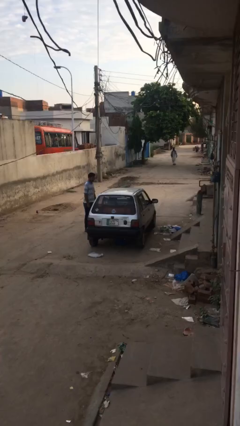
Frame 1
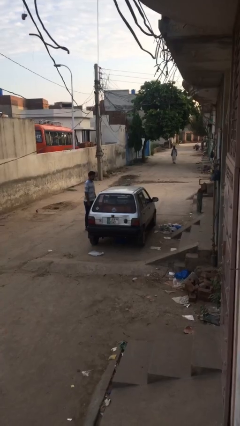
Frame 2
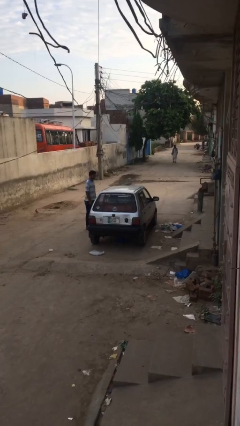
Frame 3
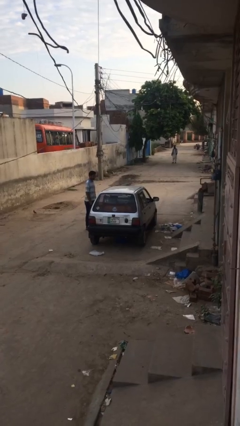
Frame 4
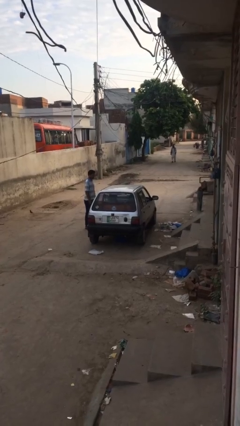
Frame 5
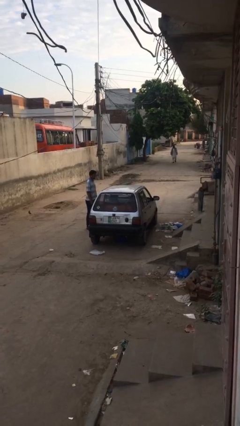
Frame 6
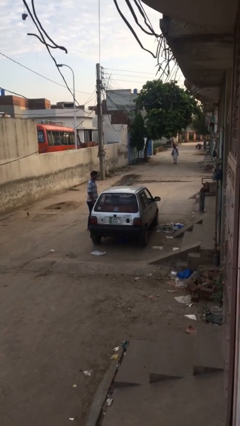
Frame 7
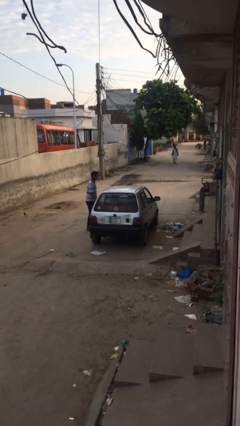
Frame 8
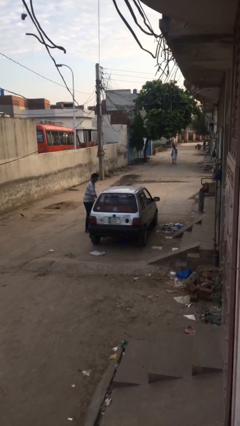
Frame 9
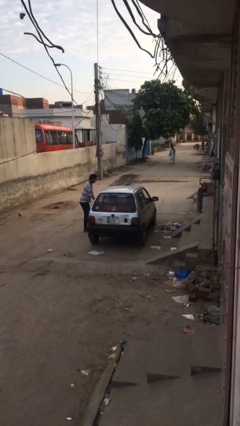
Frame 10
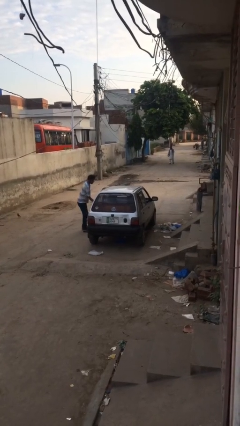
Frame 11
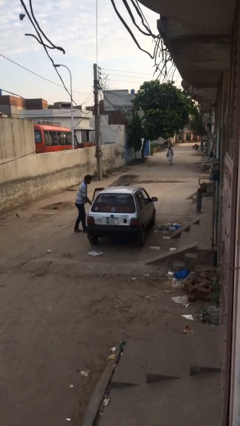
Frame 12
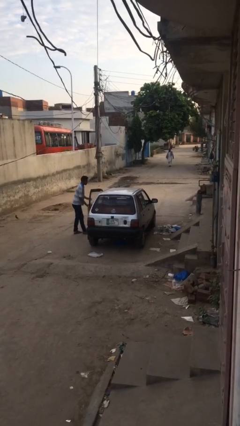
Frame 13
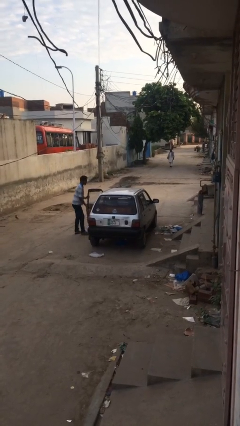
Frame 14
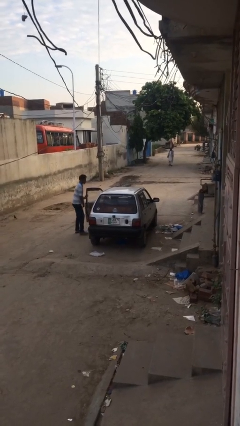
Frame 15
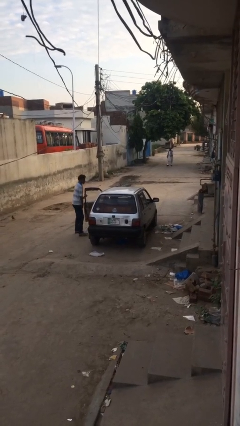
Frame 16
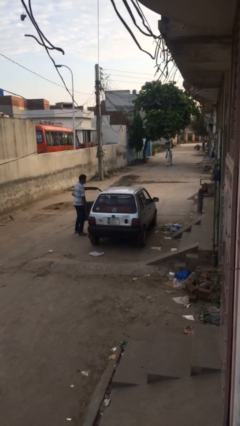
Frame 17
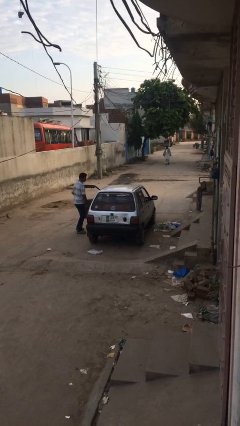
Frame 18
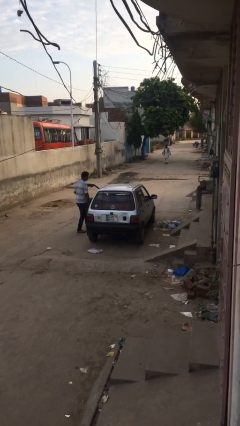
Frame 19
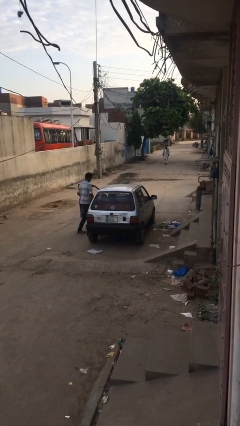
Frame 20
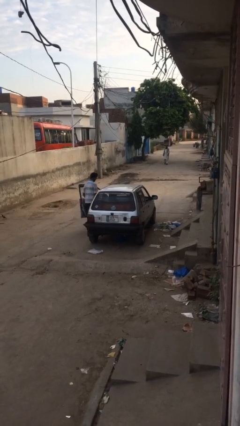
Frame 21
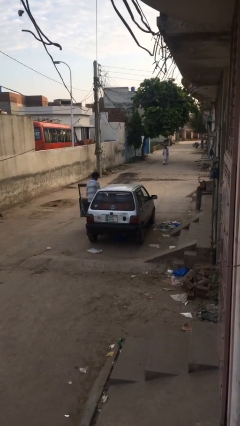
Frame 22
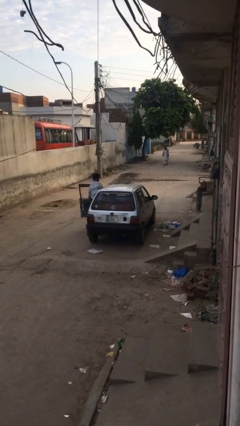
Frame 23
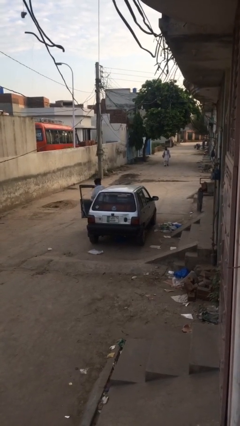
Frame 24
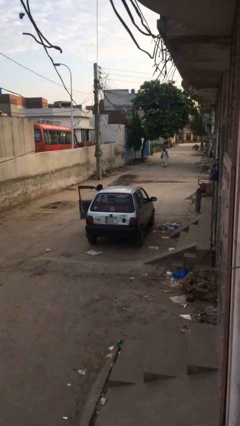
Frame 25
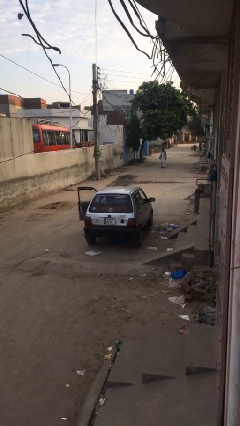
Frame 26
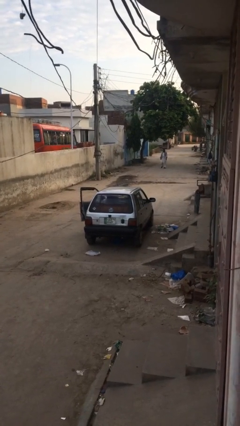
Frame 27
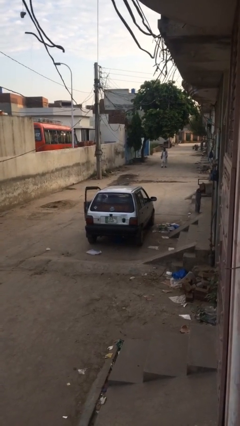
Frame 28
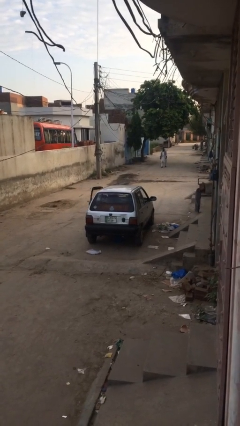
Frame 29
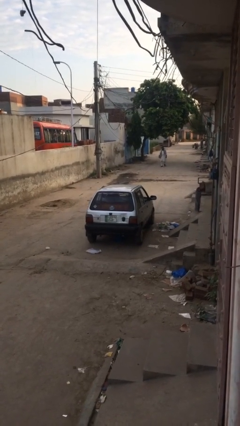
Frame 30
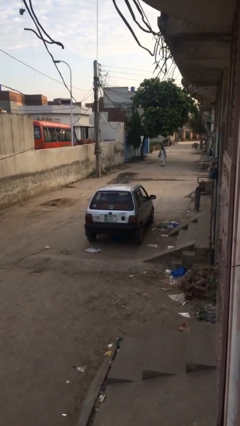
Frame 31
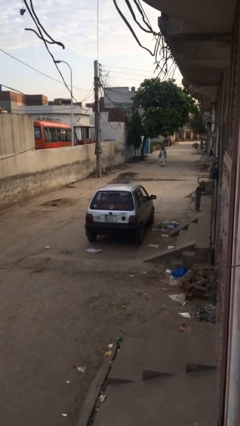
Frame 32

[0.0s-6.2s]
car picks up person

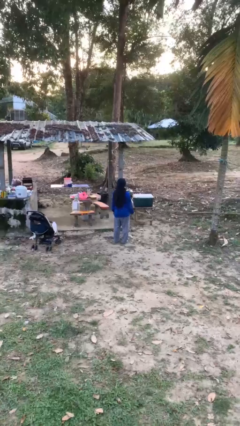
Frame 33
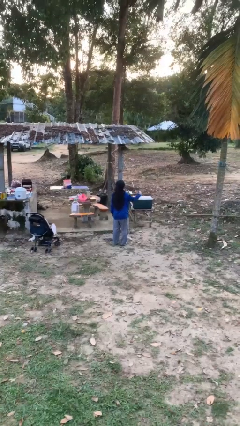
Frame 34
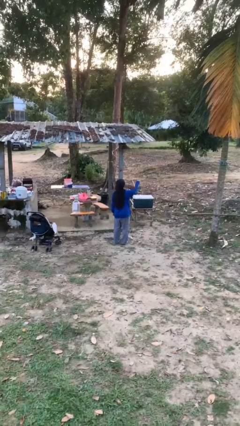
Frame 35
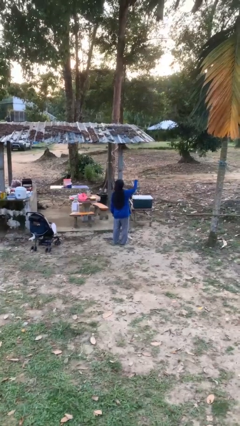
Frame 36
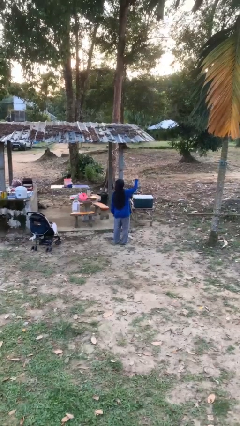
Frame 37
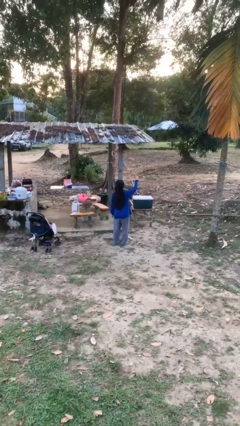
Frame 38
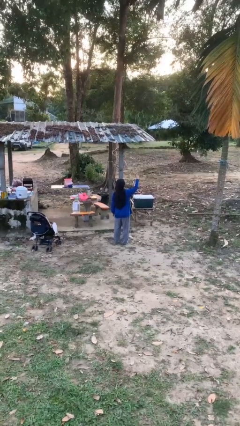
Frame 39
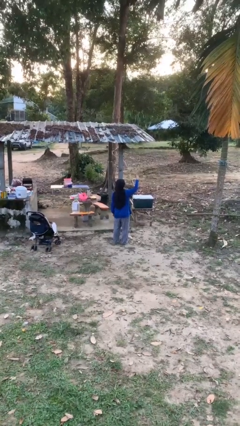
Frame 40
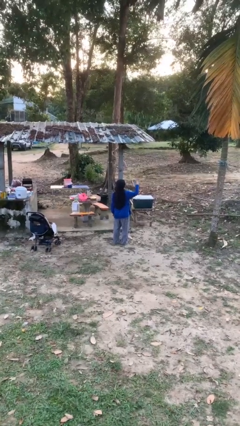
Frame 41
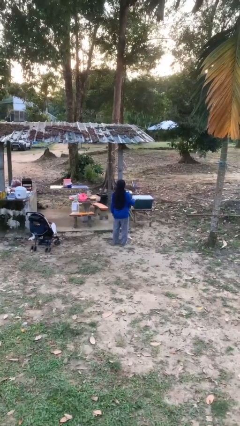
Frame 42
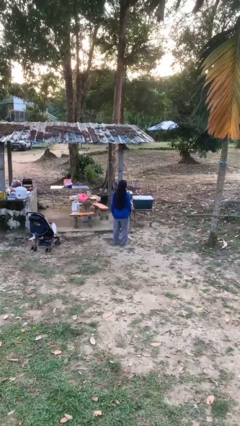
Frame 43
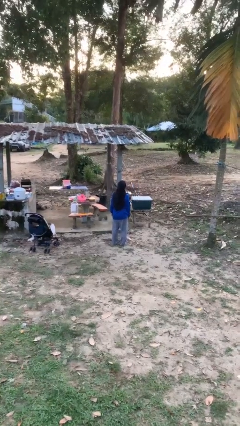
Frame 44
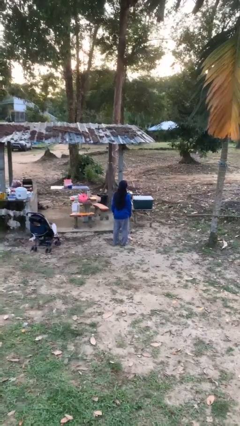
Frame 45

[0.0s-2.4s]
person gestures number three

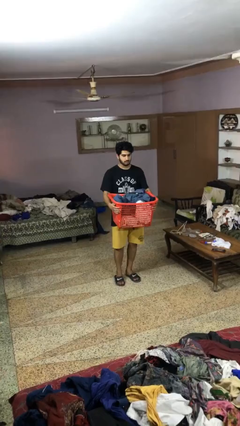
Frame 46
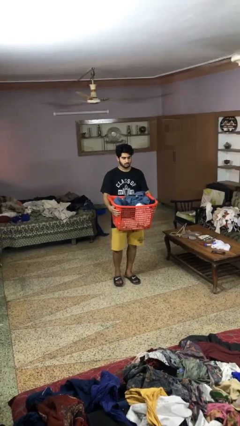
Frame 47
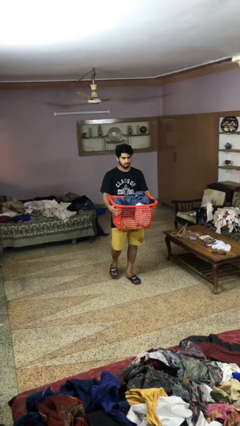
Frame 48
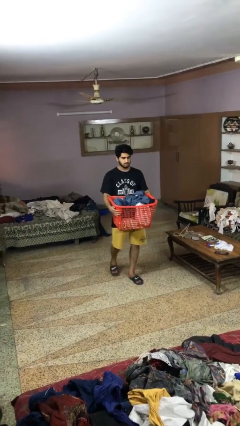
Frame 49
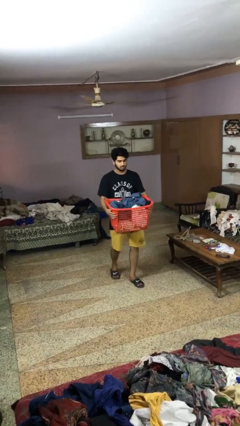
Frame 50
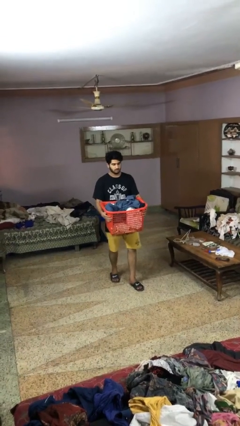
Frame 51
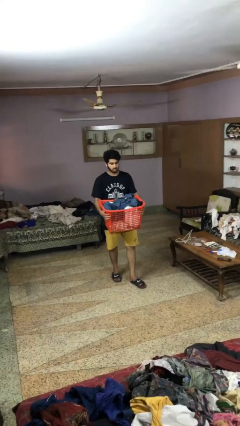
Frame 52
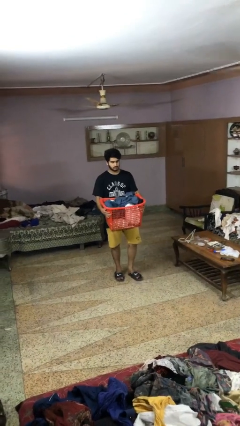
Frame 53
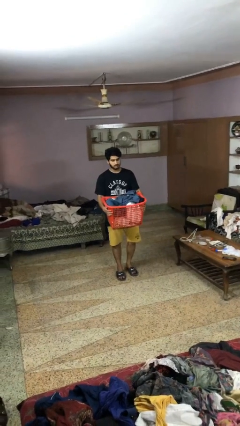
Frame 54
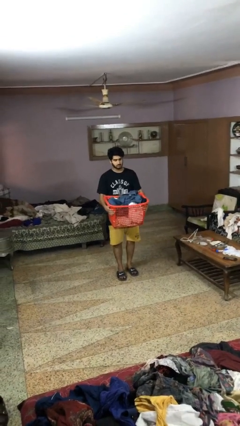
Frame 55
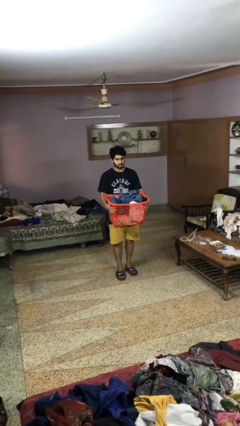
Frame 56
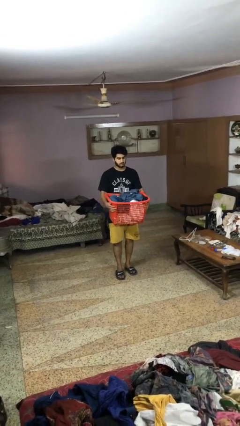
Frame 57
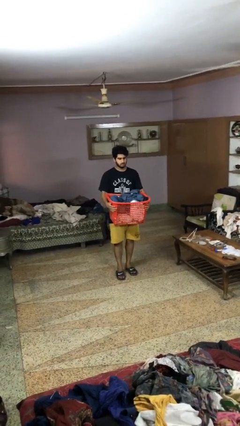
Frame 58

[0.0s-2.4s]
person carries laundry basket

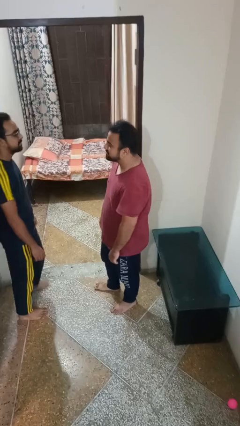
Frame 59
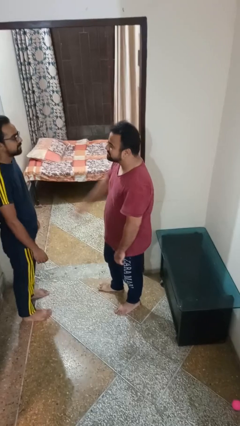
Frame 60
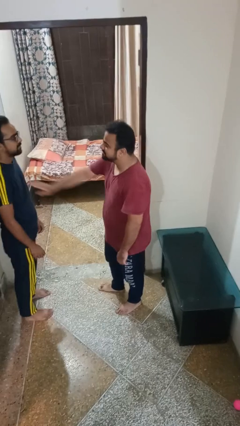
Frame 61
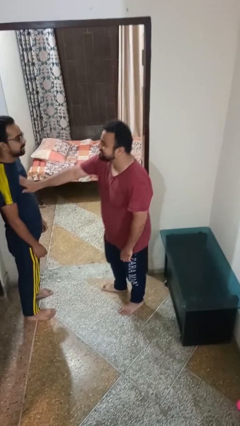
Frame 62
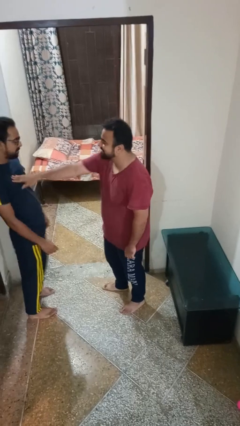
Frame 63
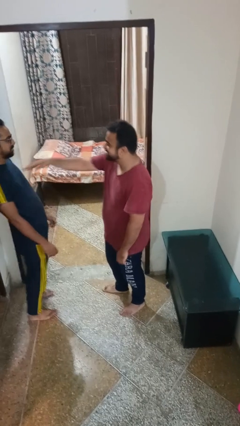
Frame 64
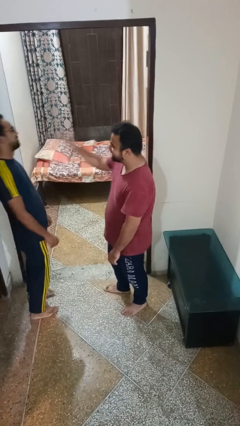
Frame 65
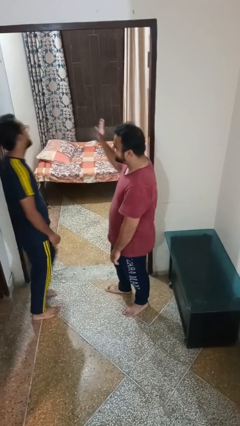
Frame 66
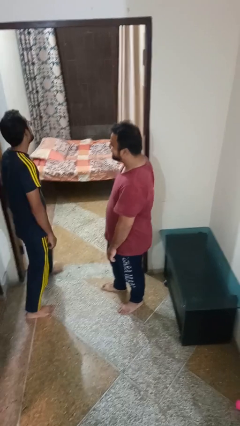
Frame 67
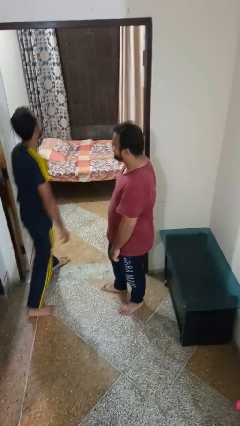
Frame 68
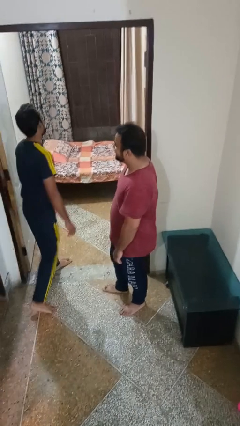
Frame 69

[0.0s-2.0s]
person shoves person

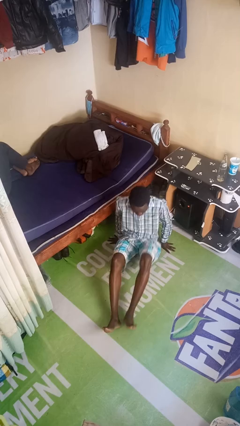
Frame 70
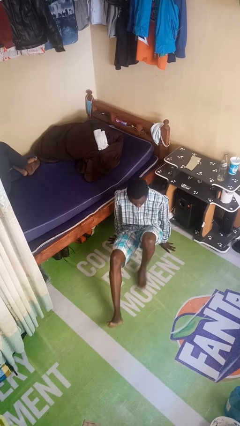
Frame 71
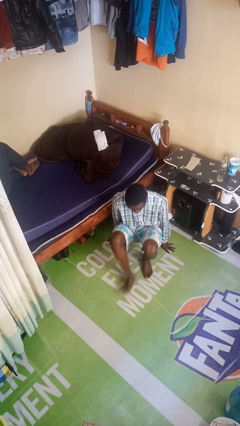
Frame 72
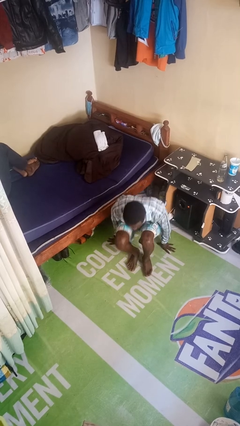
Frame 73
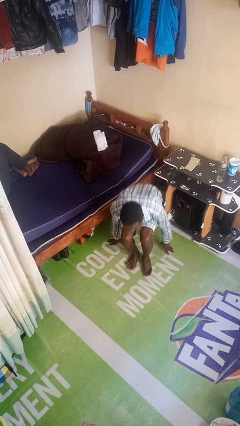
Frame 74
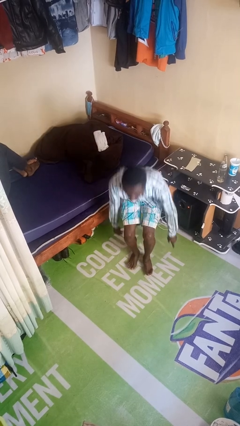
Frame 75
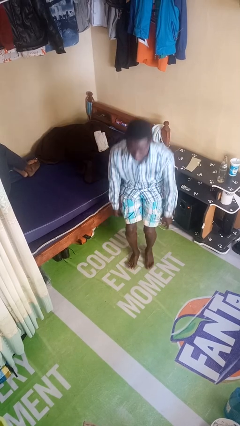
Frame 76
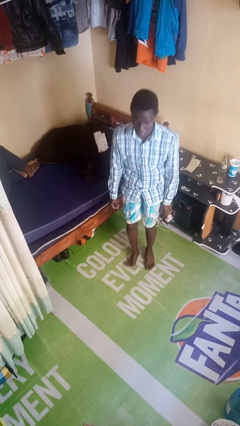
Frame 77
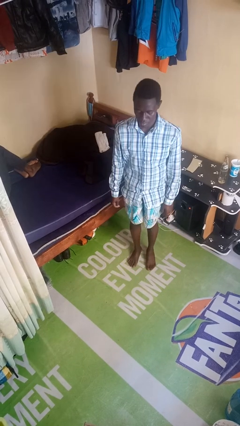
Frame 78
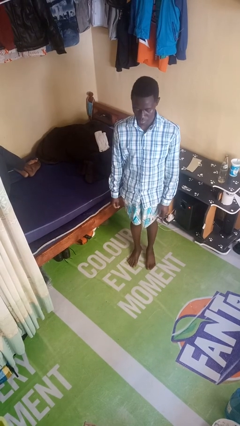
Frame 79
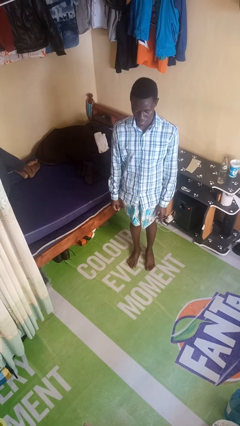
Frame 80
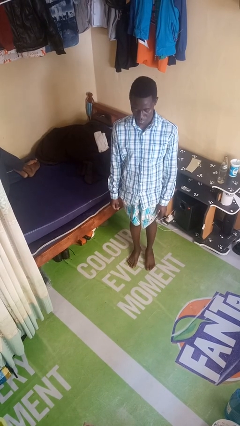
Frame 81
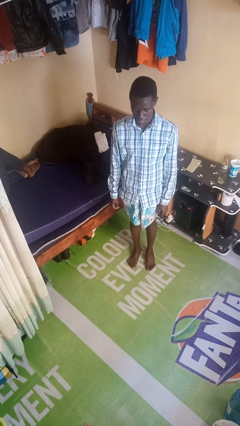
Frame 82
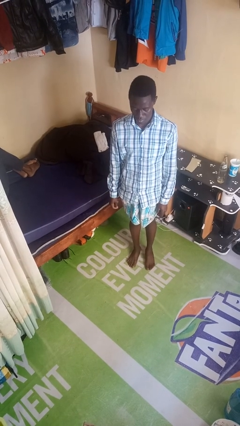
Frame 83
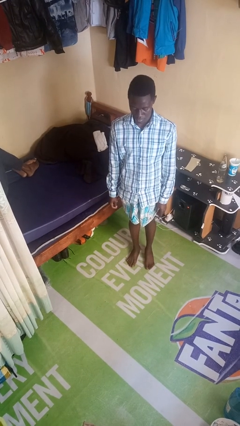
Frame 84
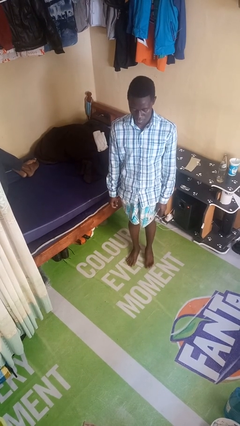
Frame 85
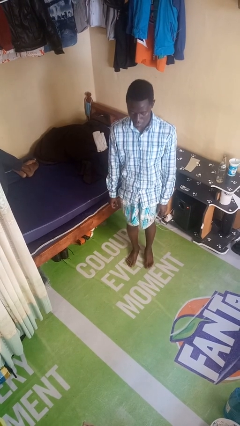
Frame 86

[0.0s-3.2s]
person stands up from floor

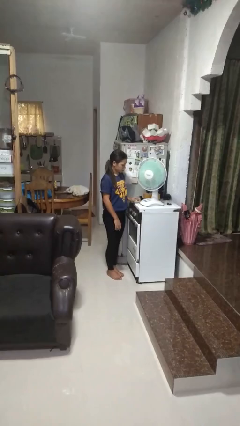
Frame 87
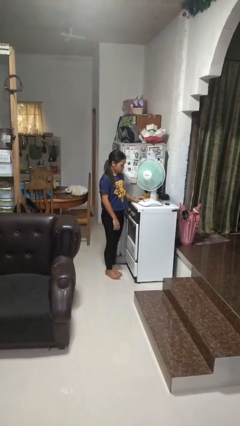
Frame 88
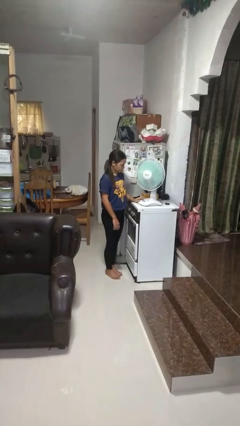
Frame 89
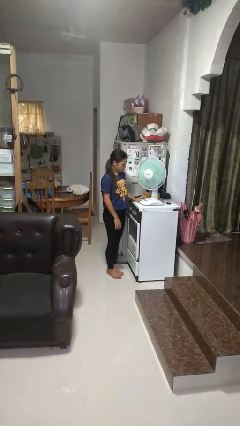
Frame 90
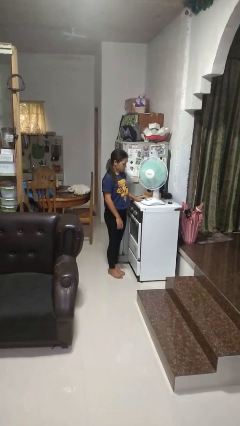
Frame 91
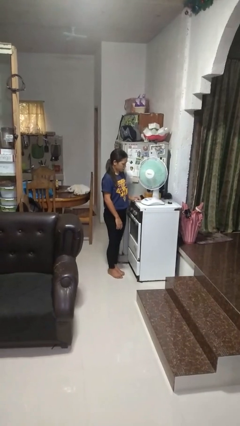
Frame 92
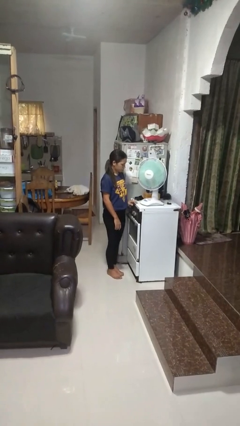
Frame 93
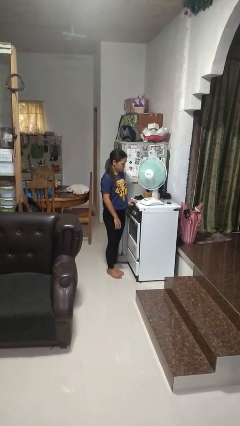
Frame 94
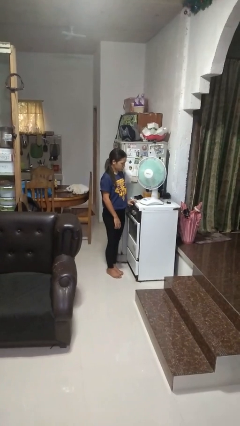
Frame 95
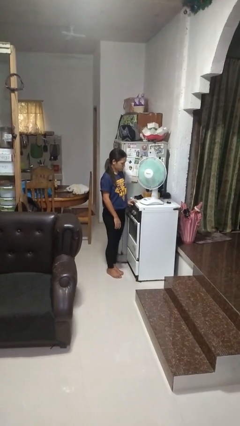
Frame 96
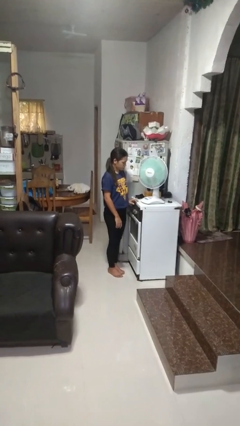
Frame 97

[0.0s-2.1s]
person turns off fan
